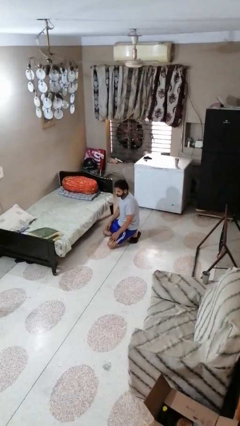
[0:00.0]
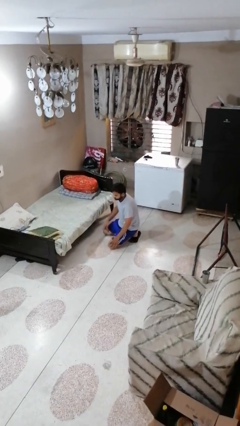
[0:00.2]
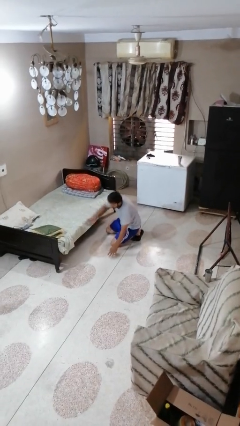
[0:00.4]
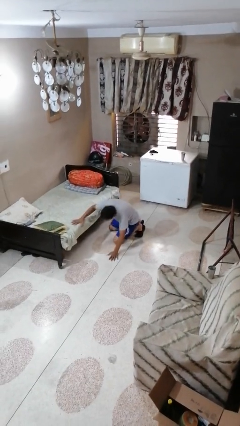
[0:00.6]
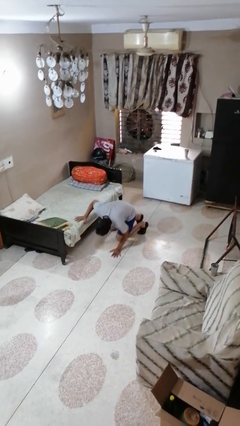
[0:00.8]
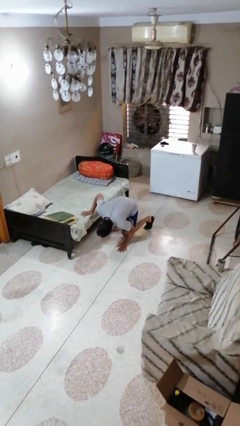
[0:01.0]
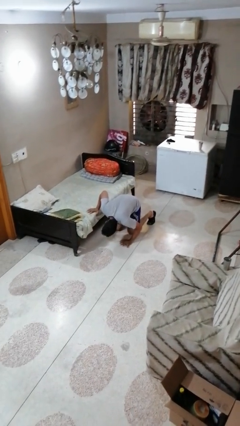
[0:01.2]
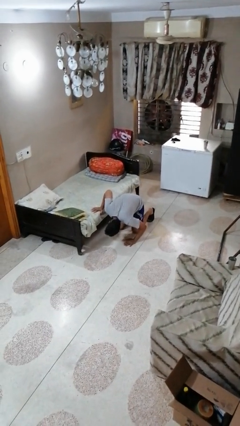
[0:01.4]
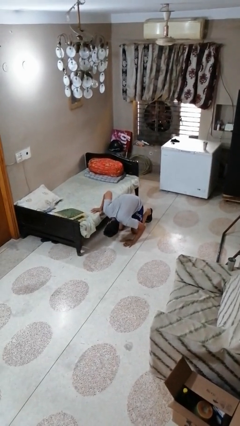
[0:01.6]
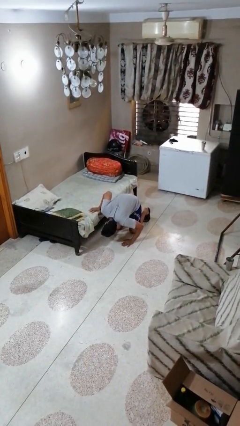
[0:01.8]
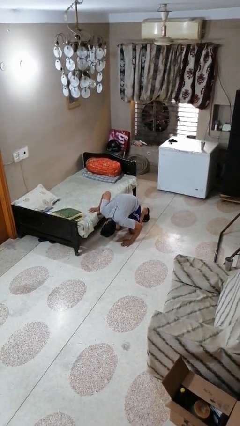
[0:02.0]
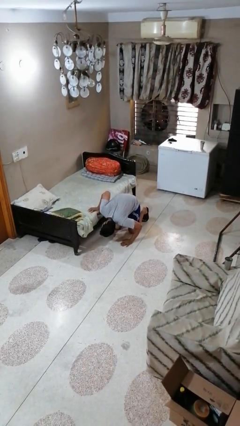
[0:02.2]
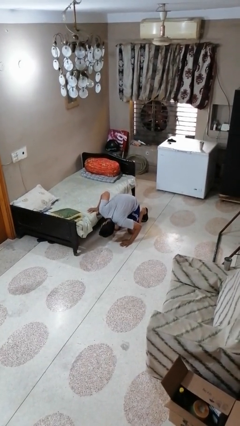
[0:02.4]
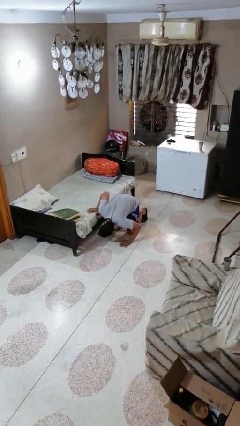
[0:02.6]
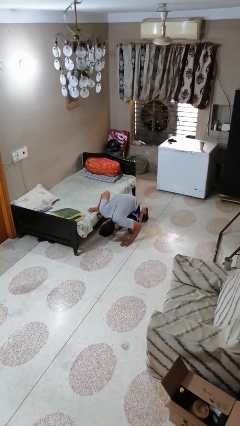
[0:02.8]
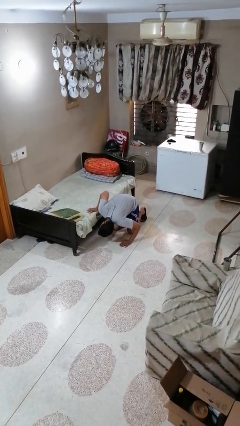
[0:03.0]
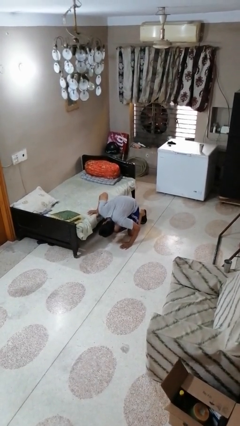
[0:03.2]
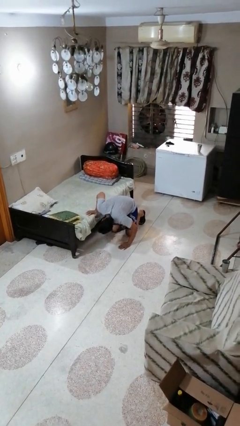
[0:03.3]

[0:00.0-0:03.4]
person searches under bed

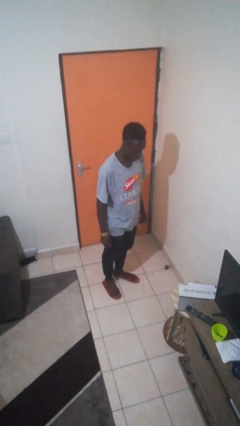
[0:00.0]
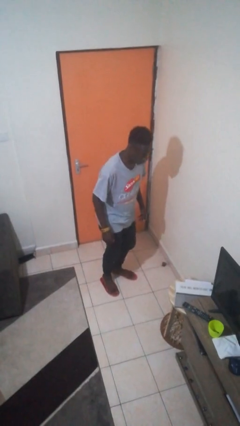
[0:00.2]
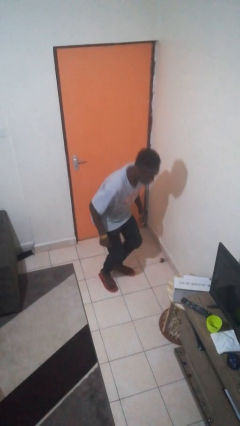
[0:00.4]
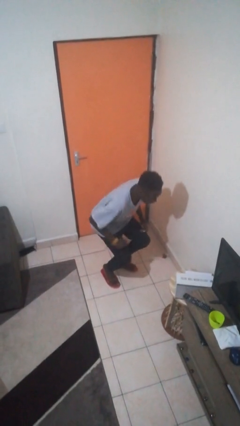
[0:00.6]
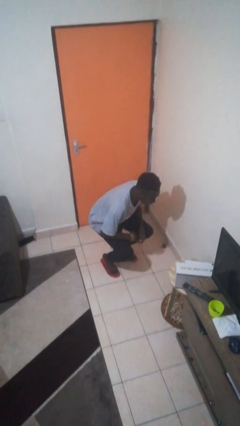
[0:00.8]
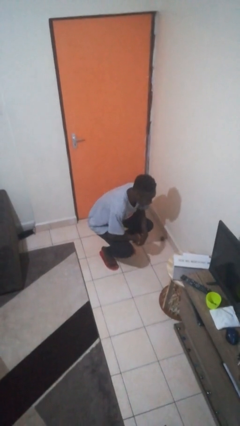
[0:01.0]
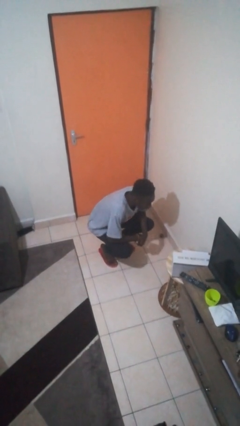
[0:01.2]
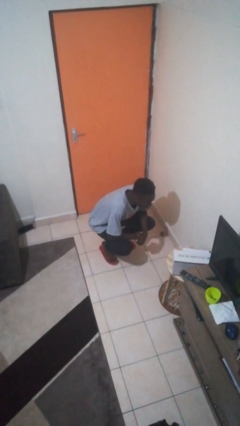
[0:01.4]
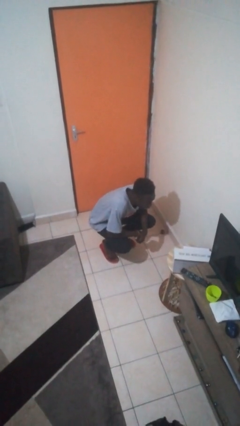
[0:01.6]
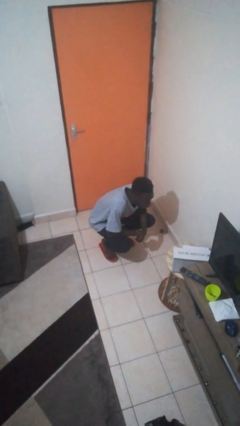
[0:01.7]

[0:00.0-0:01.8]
person squats

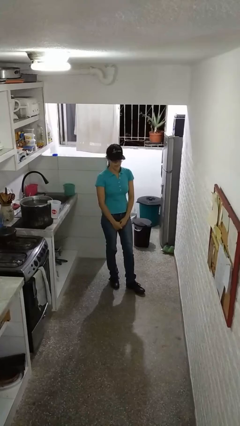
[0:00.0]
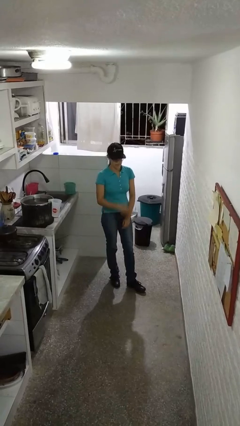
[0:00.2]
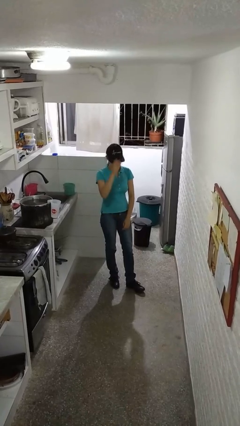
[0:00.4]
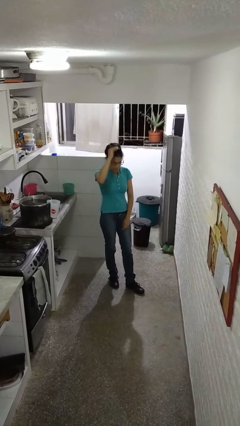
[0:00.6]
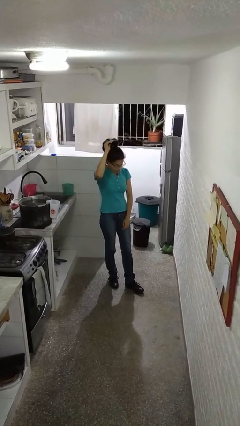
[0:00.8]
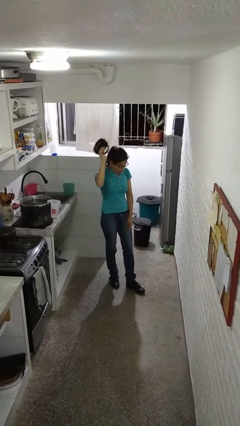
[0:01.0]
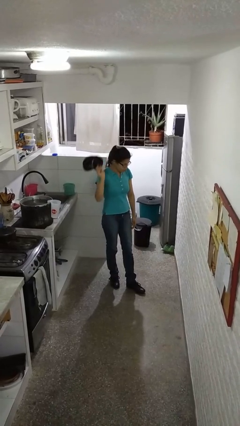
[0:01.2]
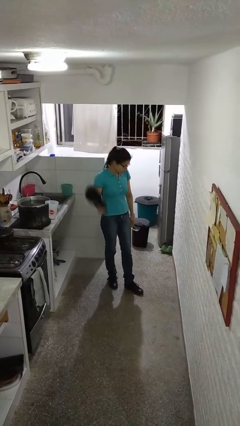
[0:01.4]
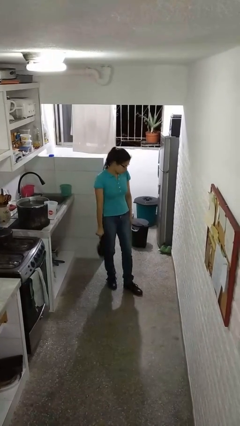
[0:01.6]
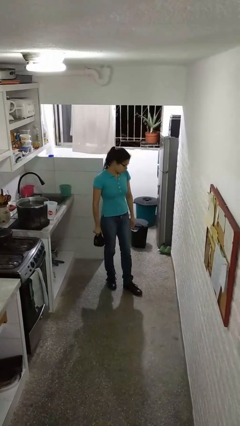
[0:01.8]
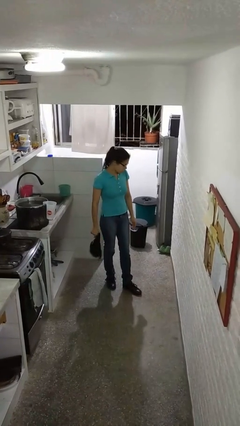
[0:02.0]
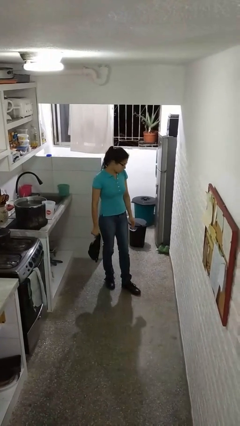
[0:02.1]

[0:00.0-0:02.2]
person takes off hat

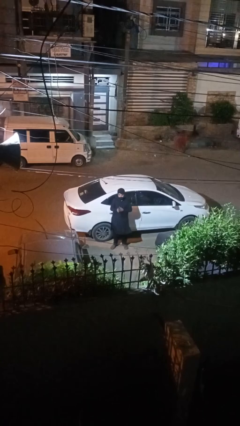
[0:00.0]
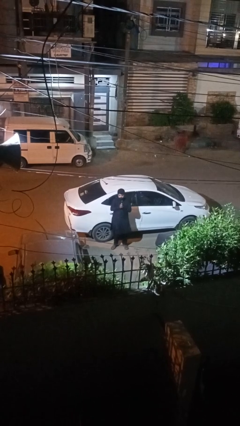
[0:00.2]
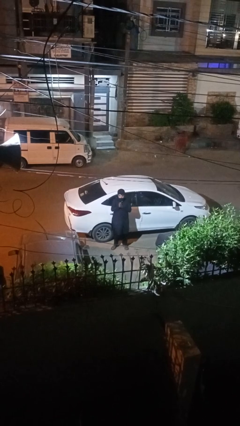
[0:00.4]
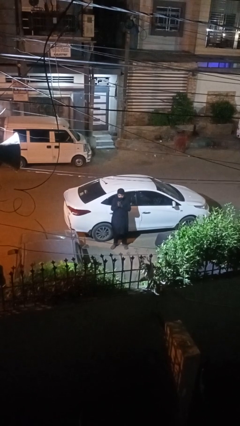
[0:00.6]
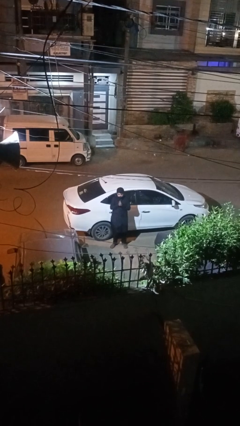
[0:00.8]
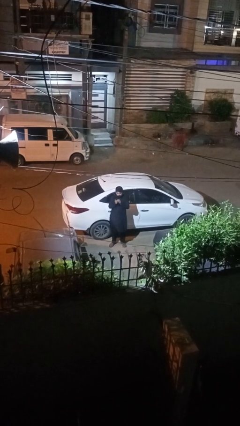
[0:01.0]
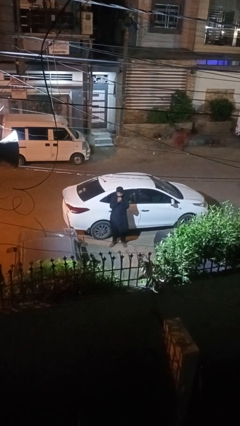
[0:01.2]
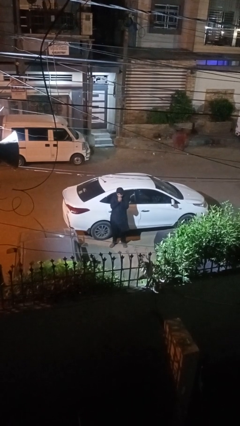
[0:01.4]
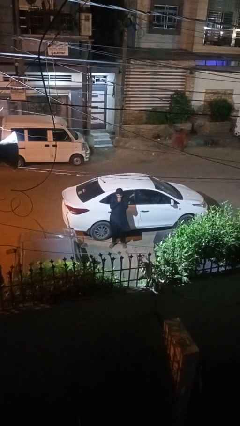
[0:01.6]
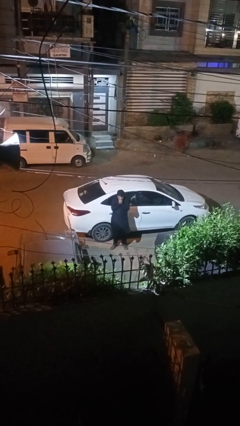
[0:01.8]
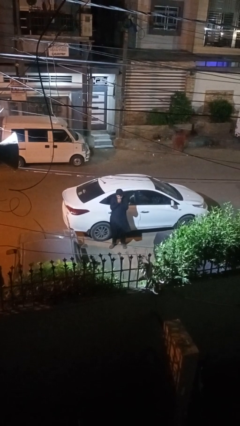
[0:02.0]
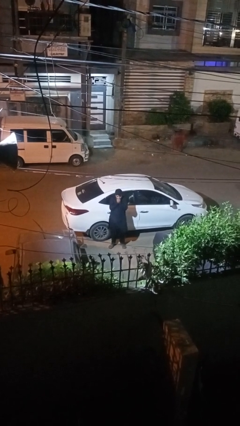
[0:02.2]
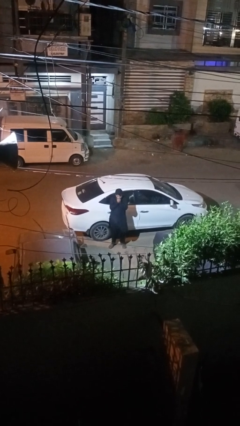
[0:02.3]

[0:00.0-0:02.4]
person blows into hands

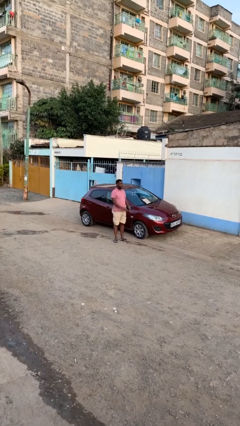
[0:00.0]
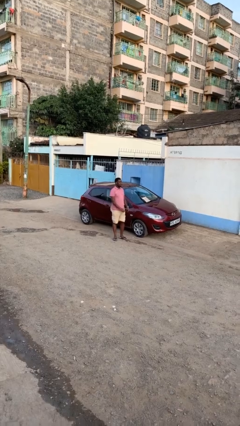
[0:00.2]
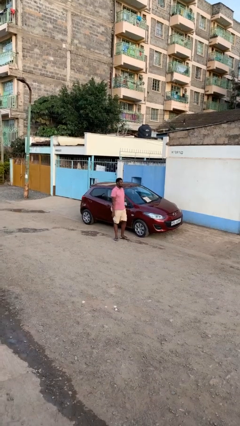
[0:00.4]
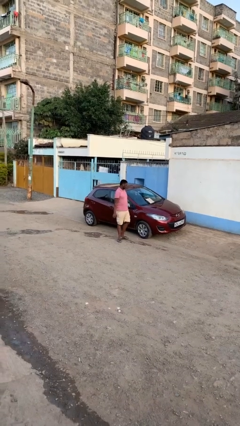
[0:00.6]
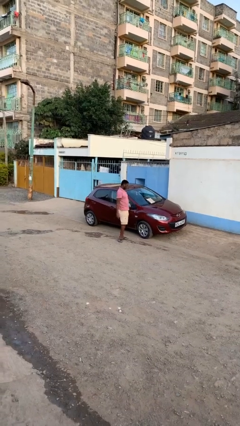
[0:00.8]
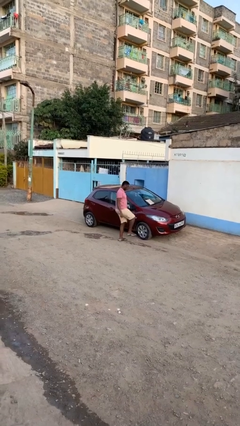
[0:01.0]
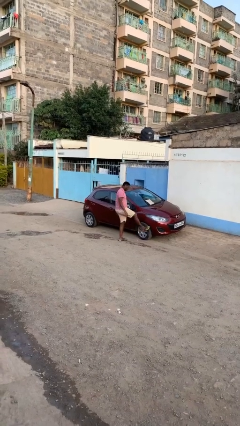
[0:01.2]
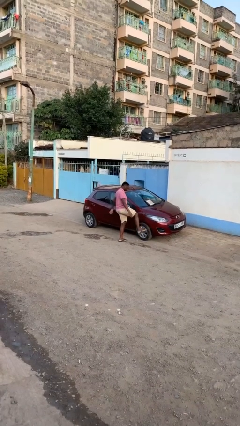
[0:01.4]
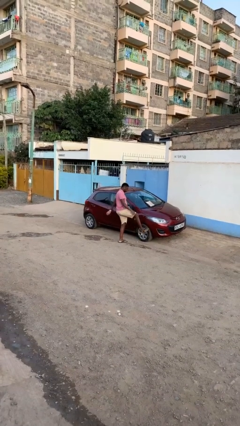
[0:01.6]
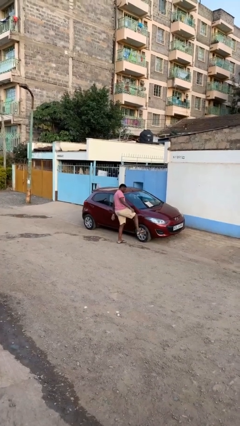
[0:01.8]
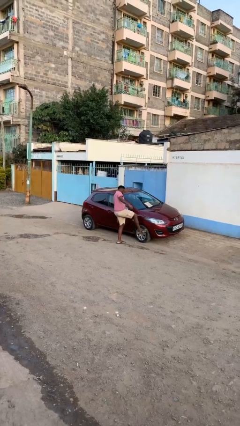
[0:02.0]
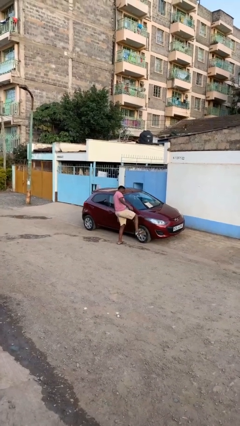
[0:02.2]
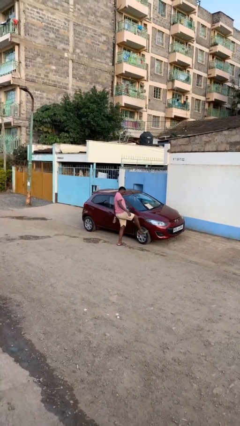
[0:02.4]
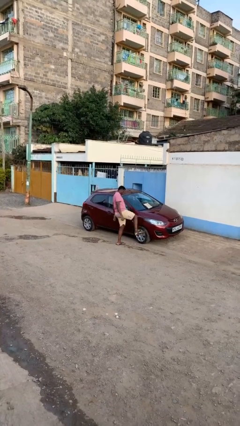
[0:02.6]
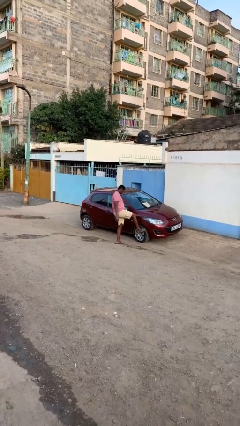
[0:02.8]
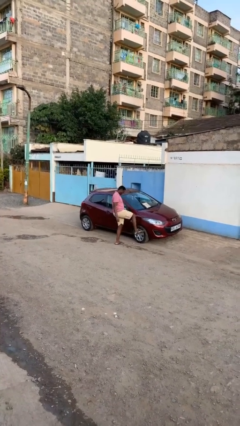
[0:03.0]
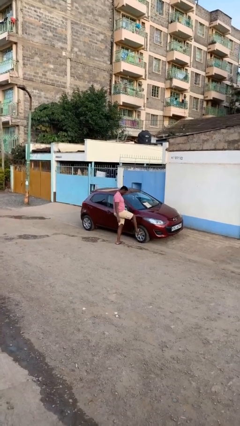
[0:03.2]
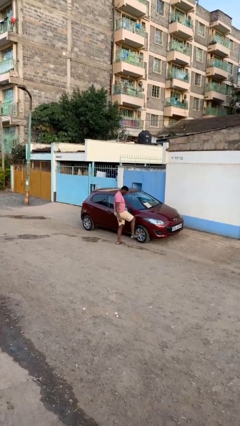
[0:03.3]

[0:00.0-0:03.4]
person kicks car tires

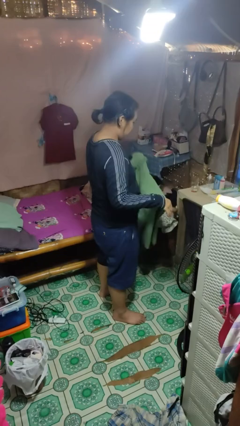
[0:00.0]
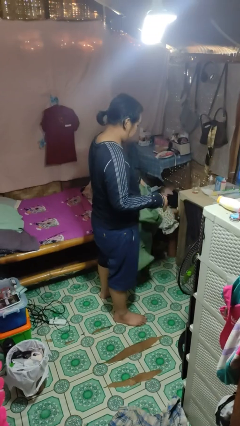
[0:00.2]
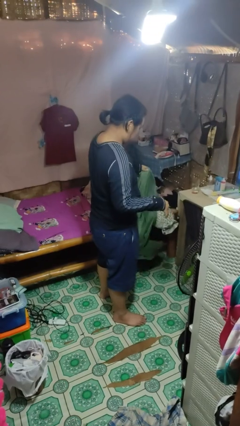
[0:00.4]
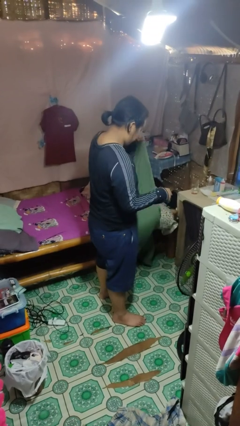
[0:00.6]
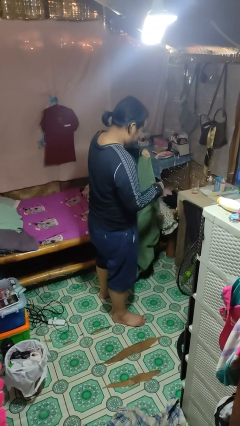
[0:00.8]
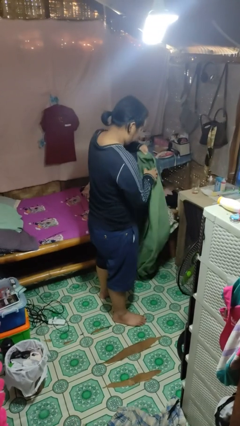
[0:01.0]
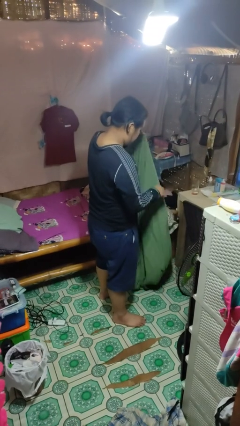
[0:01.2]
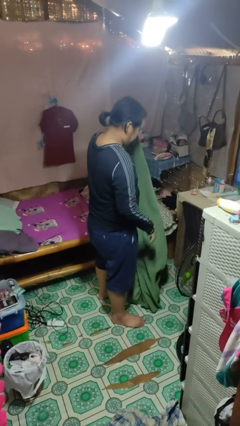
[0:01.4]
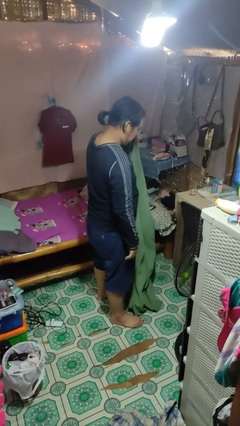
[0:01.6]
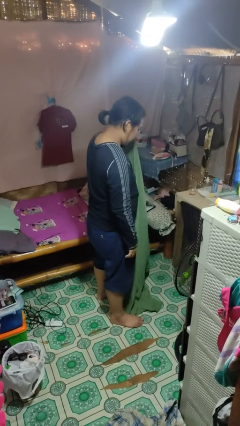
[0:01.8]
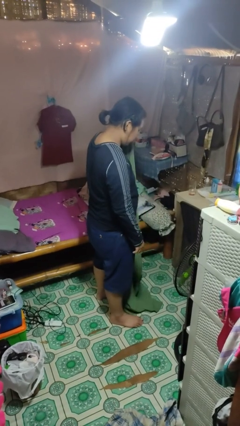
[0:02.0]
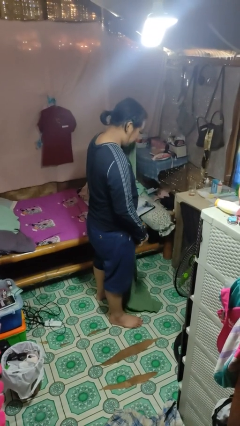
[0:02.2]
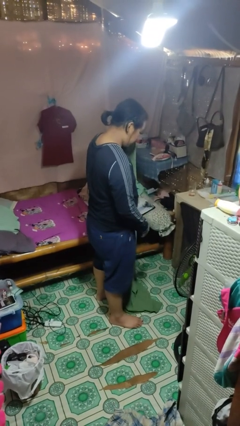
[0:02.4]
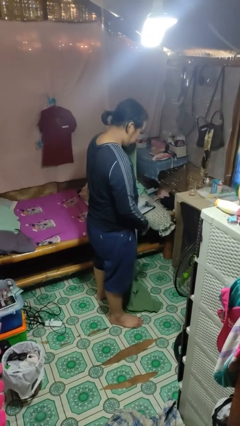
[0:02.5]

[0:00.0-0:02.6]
person unfolds blanket

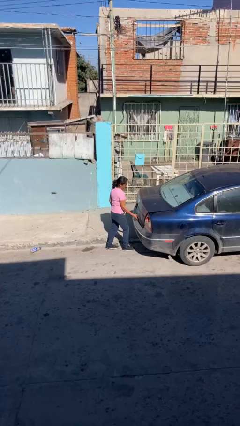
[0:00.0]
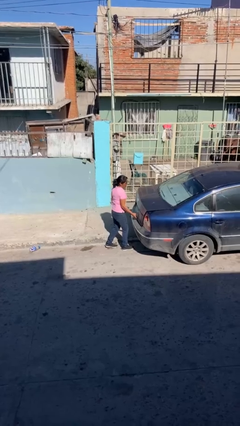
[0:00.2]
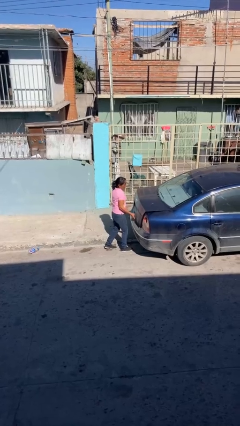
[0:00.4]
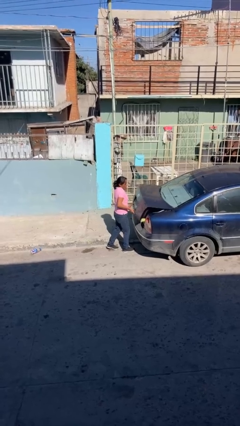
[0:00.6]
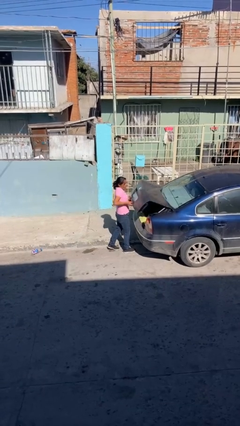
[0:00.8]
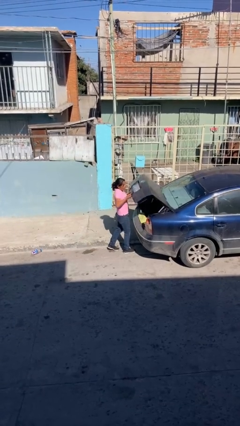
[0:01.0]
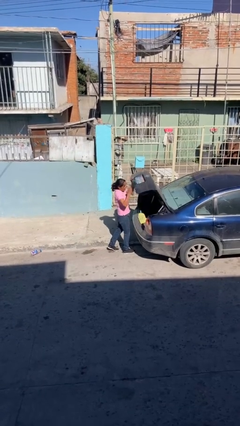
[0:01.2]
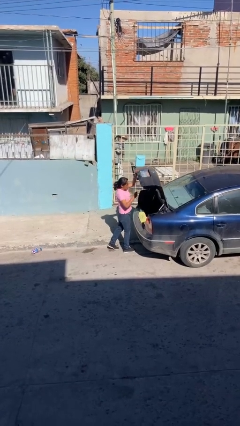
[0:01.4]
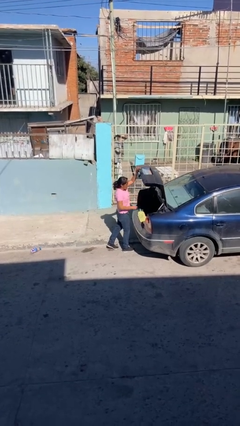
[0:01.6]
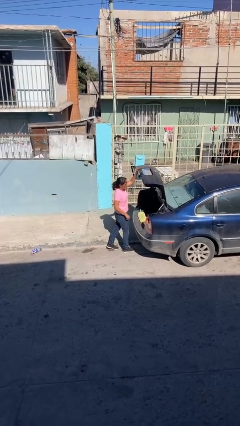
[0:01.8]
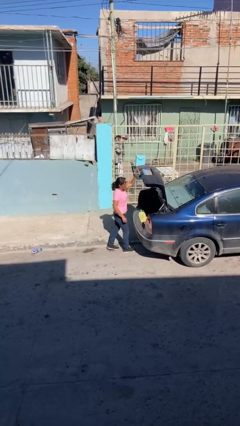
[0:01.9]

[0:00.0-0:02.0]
person opens car trunk
